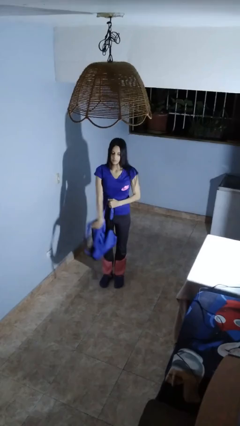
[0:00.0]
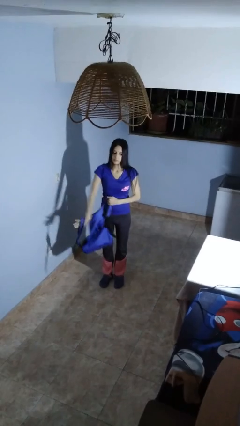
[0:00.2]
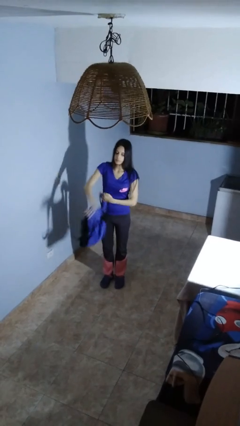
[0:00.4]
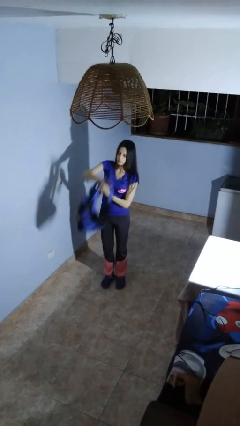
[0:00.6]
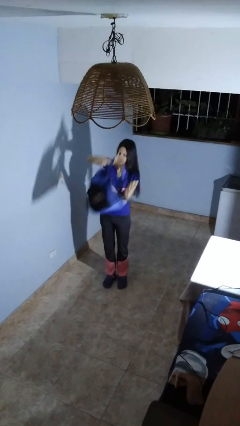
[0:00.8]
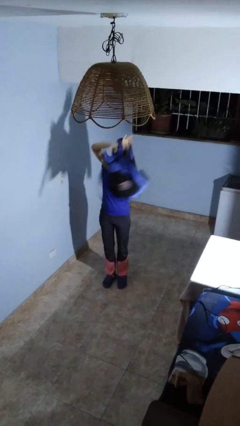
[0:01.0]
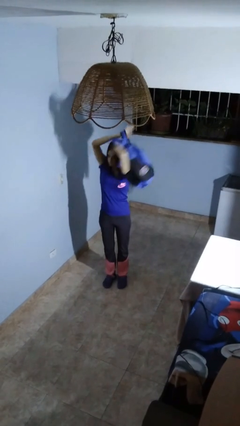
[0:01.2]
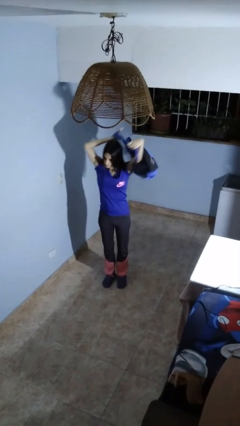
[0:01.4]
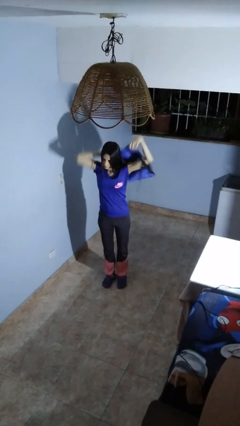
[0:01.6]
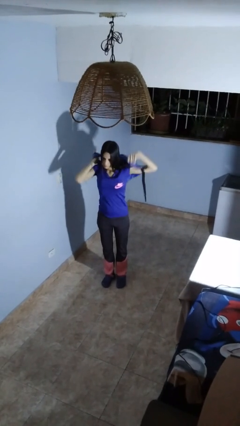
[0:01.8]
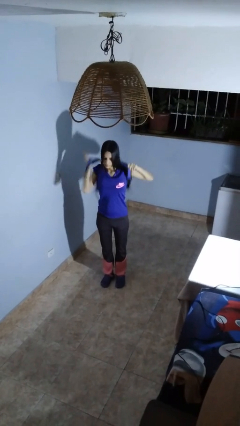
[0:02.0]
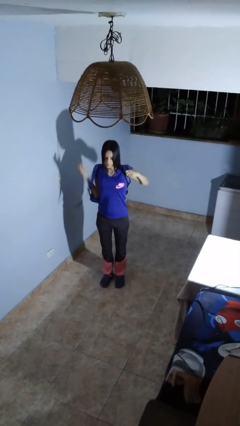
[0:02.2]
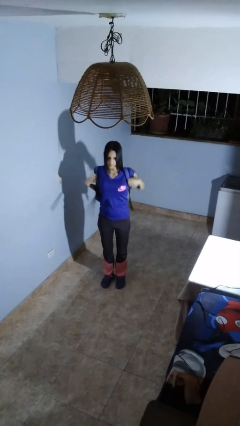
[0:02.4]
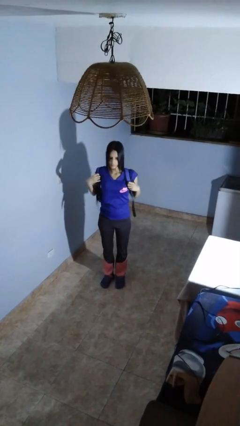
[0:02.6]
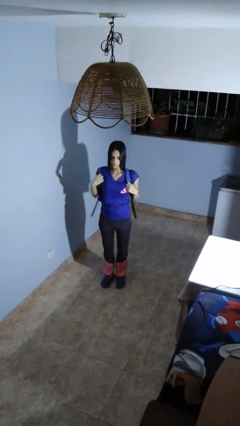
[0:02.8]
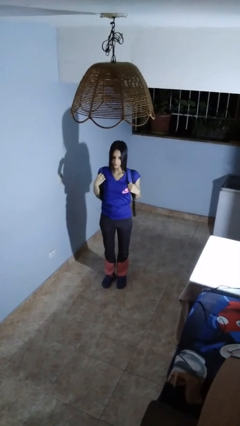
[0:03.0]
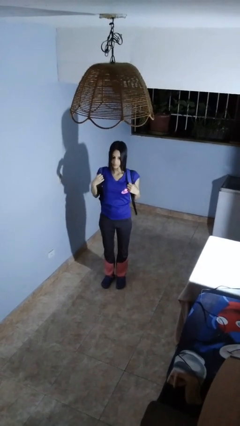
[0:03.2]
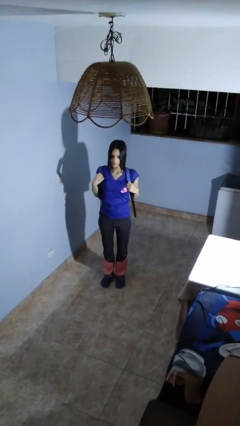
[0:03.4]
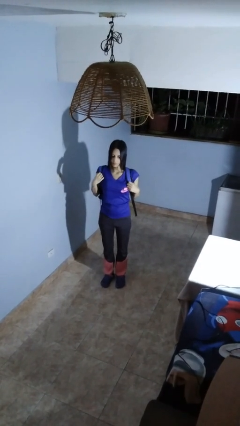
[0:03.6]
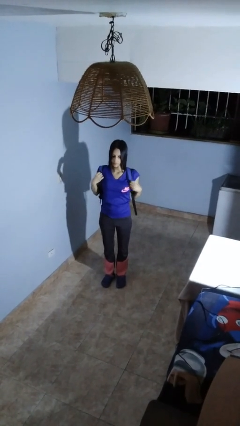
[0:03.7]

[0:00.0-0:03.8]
person puts on backpack

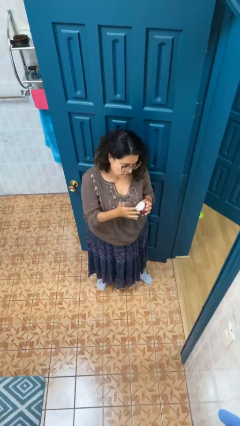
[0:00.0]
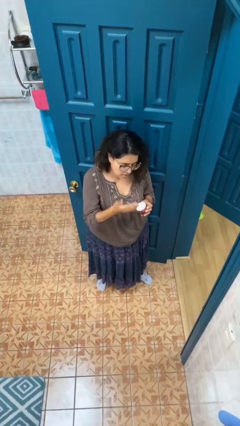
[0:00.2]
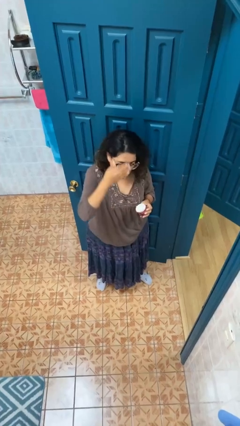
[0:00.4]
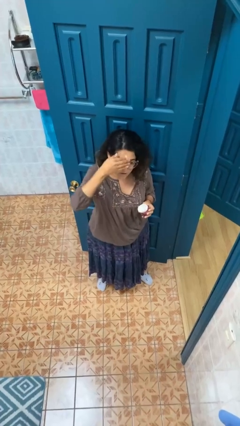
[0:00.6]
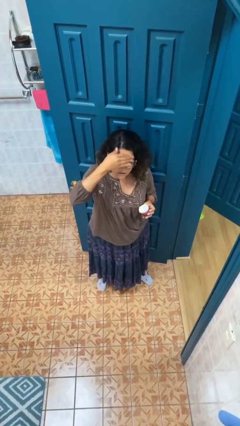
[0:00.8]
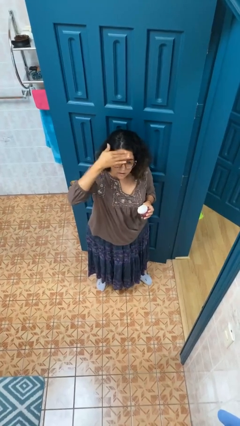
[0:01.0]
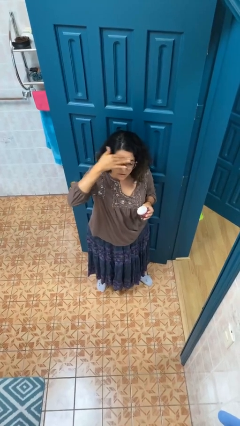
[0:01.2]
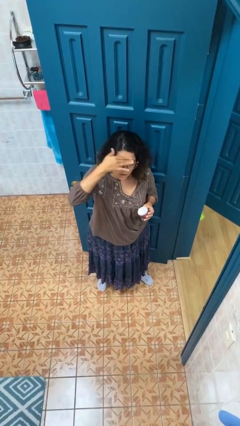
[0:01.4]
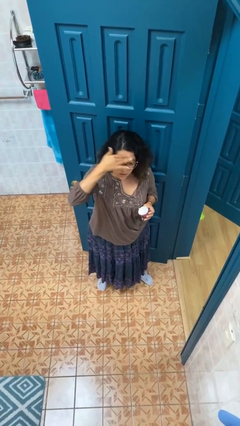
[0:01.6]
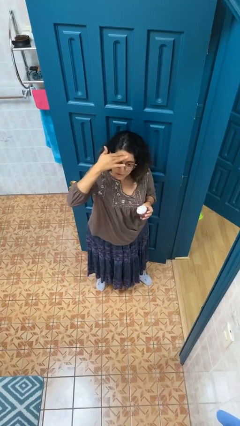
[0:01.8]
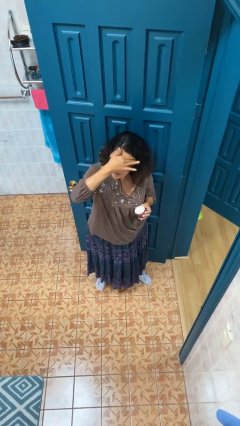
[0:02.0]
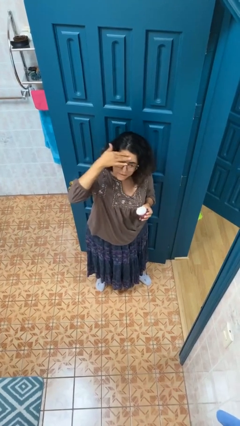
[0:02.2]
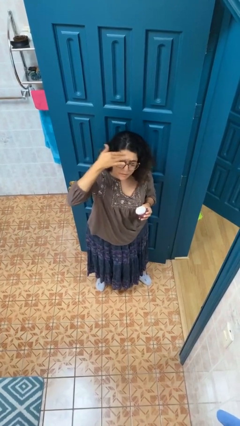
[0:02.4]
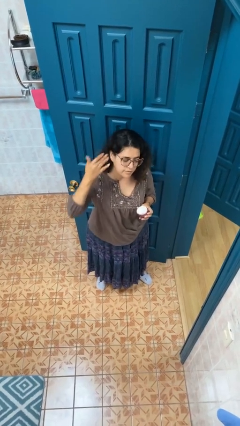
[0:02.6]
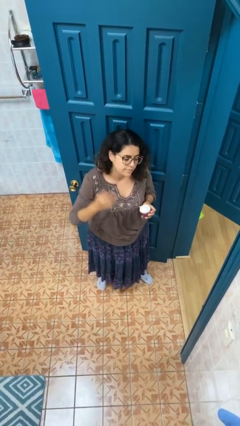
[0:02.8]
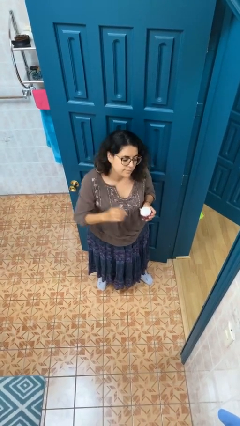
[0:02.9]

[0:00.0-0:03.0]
person applies facial moisturizer

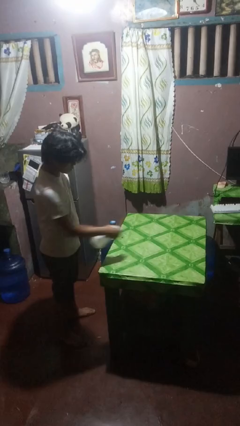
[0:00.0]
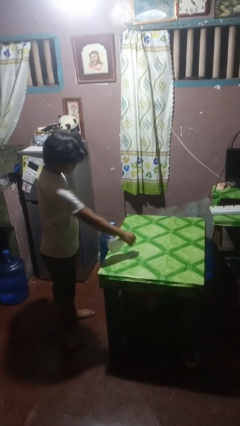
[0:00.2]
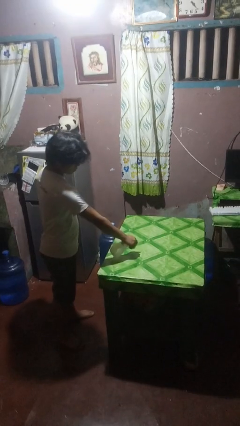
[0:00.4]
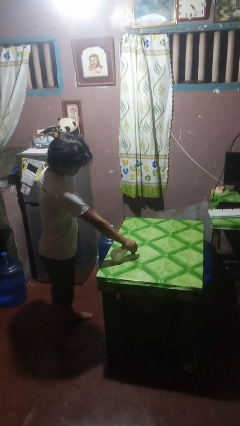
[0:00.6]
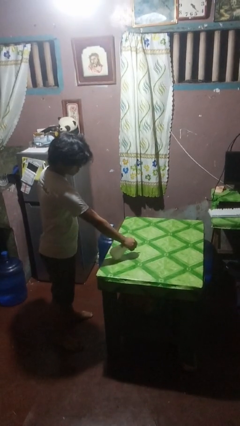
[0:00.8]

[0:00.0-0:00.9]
person sprays from bottle

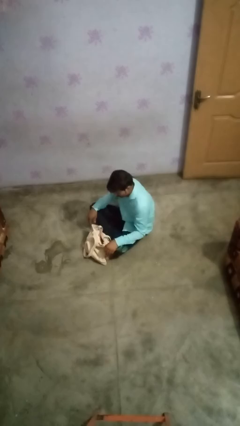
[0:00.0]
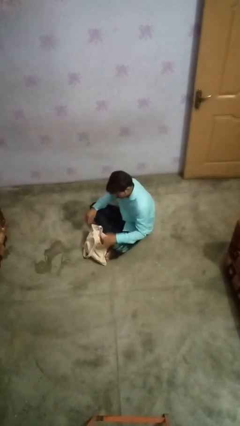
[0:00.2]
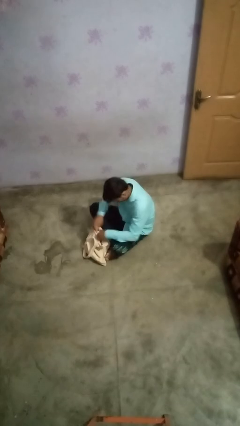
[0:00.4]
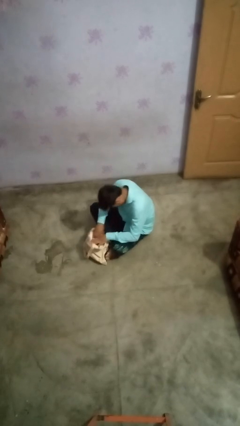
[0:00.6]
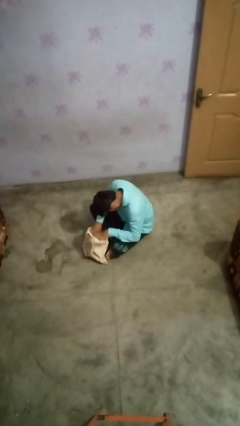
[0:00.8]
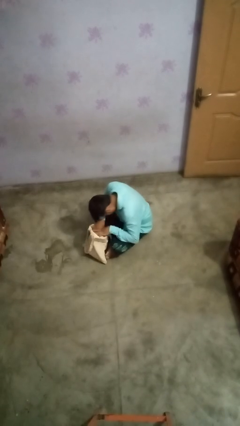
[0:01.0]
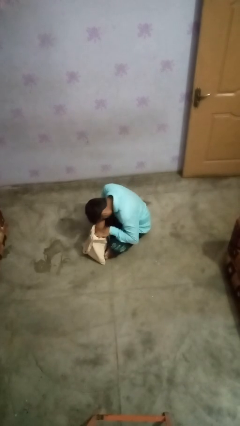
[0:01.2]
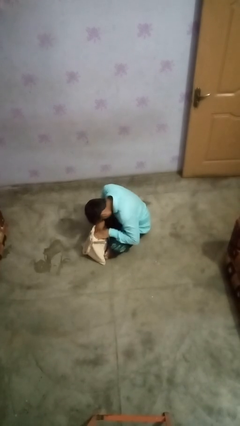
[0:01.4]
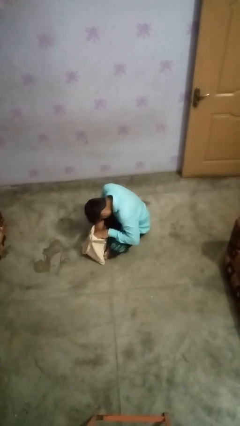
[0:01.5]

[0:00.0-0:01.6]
person searches in bag

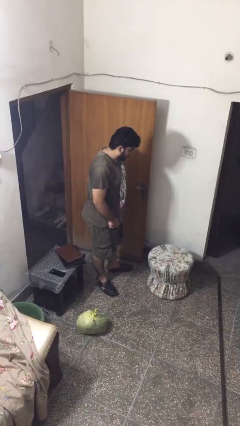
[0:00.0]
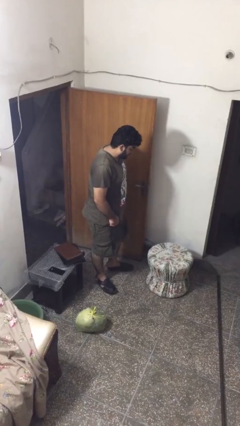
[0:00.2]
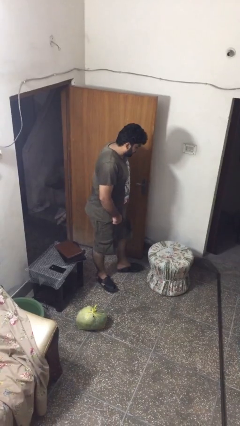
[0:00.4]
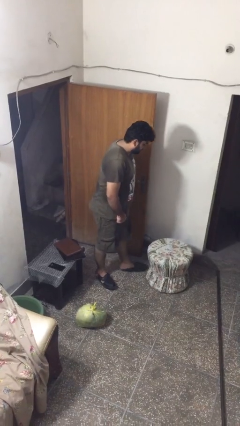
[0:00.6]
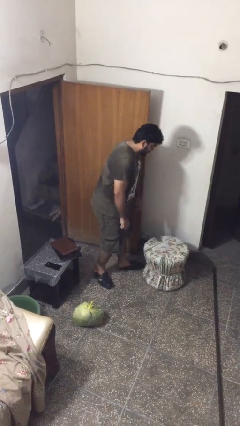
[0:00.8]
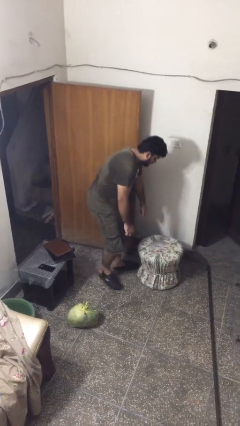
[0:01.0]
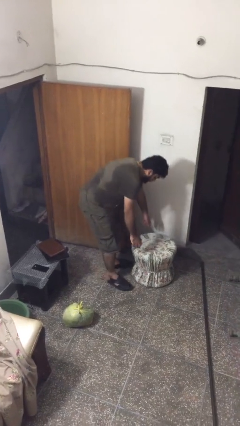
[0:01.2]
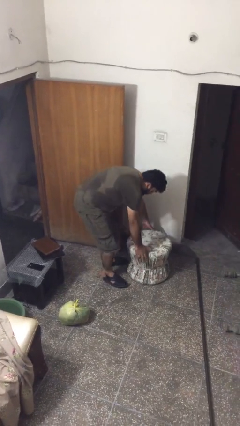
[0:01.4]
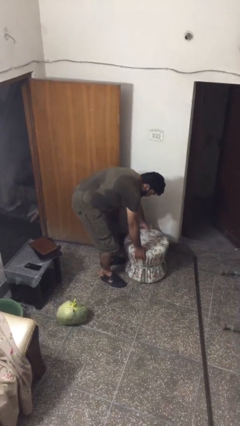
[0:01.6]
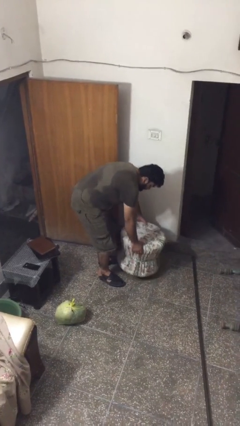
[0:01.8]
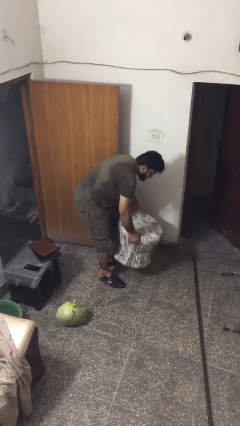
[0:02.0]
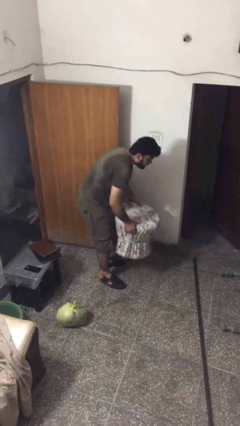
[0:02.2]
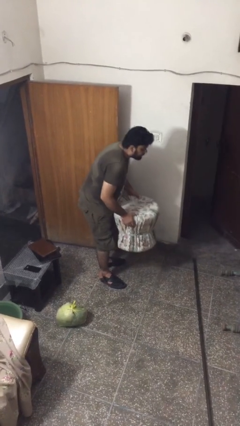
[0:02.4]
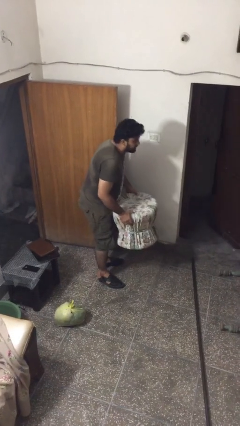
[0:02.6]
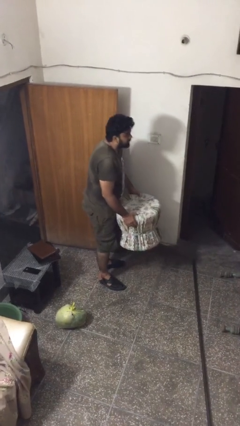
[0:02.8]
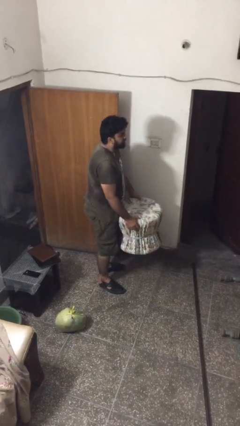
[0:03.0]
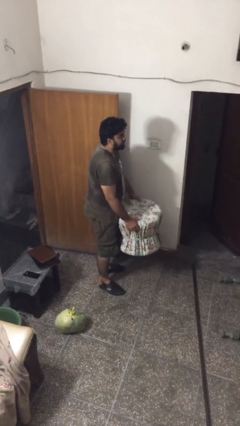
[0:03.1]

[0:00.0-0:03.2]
person picks up object from floor

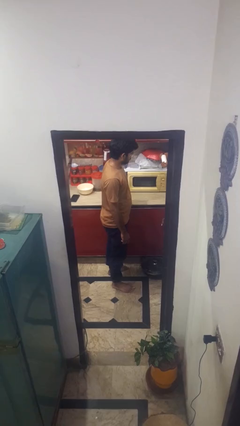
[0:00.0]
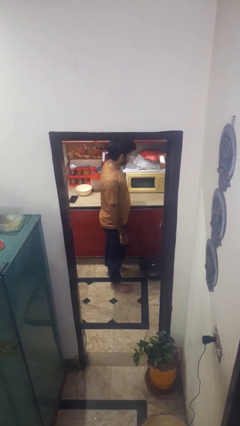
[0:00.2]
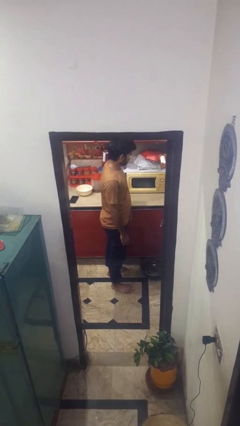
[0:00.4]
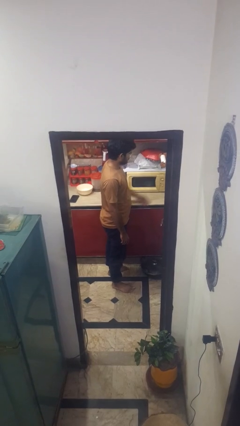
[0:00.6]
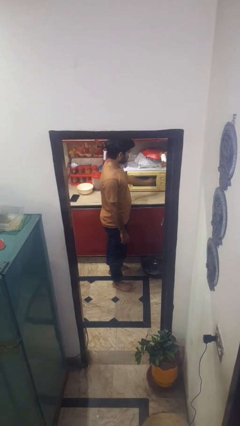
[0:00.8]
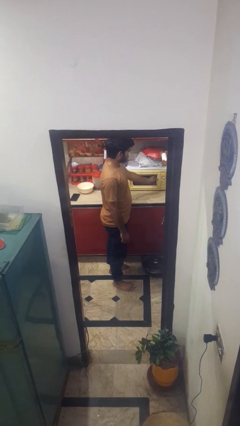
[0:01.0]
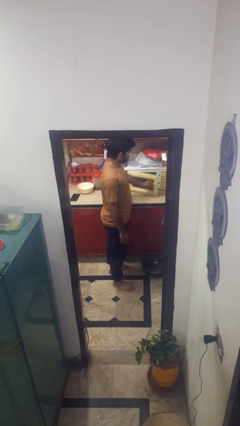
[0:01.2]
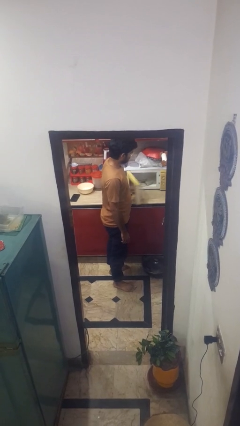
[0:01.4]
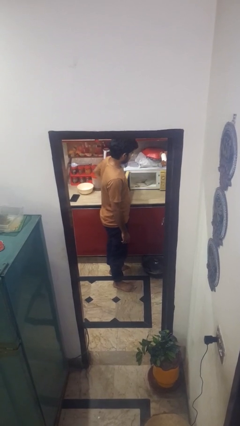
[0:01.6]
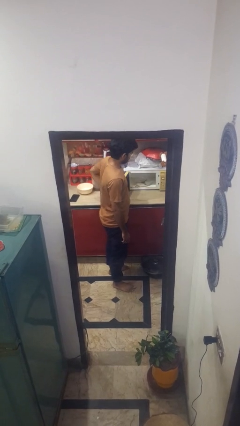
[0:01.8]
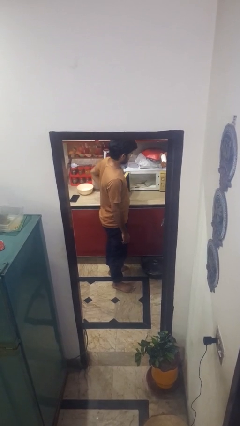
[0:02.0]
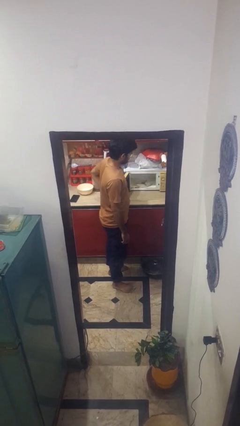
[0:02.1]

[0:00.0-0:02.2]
person opens microwave

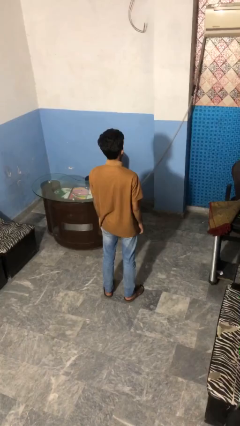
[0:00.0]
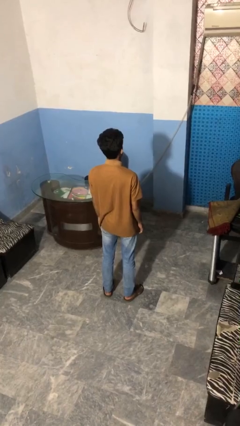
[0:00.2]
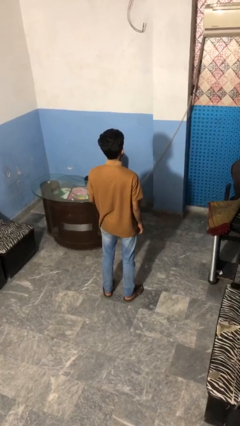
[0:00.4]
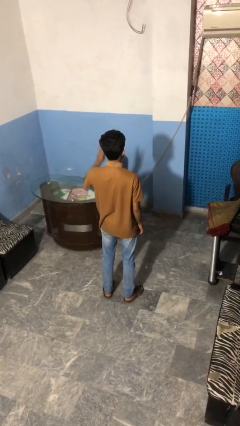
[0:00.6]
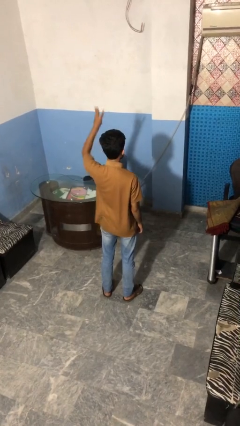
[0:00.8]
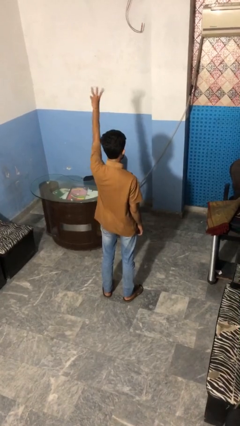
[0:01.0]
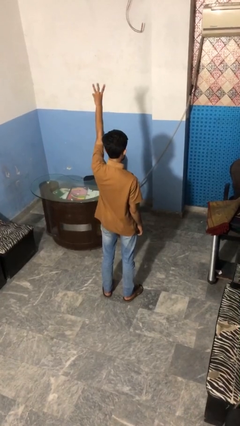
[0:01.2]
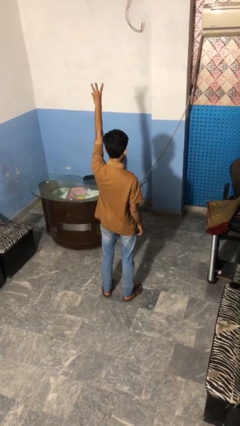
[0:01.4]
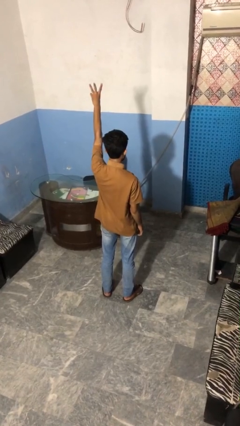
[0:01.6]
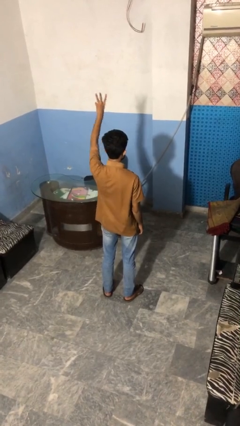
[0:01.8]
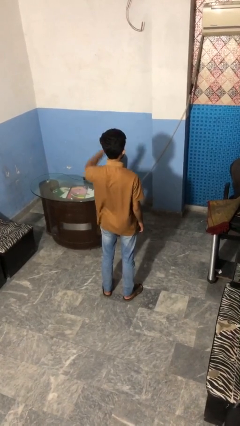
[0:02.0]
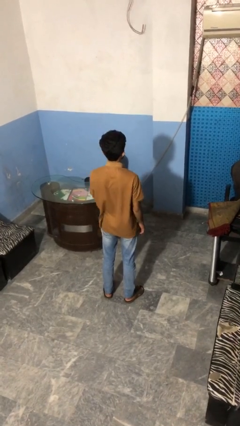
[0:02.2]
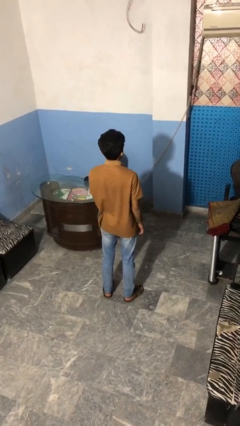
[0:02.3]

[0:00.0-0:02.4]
person gestures number three

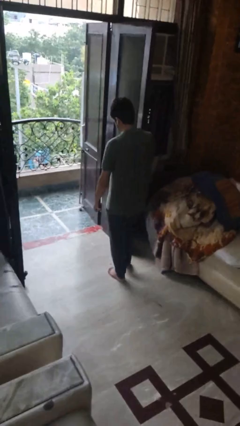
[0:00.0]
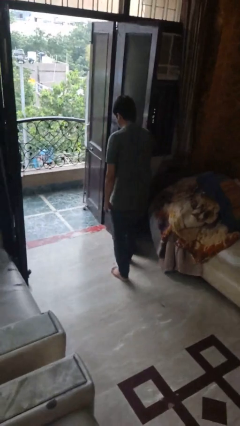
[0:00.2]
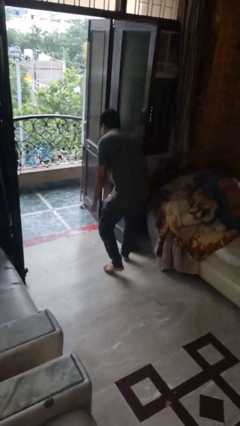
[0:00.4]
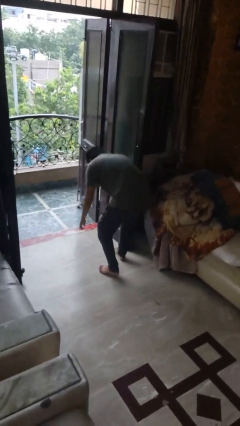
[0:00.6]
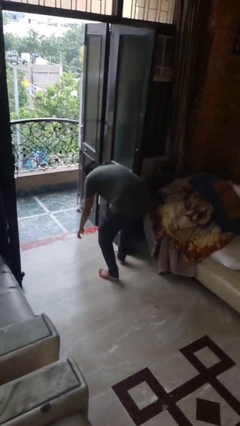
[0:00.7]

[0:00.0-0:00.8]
person trips on object on floor
